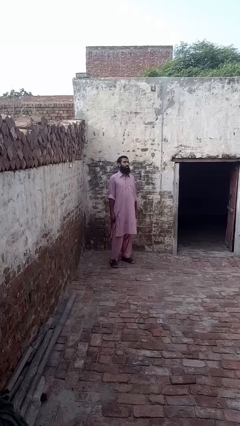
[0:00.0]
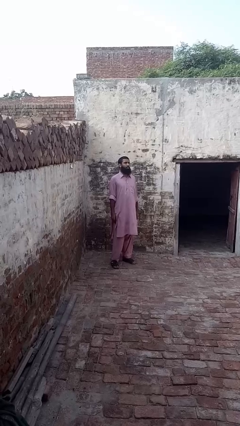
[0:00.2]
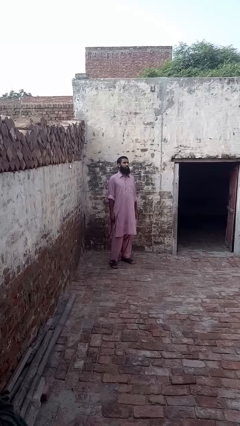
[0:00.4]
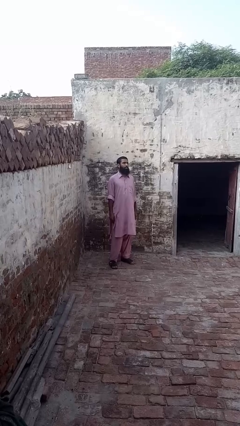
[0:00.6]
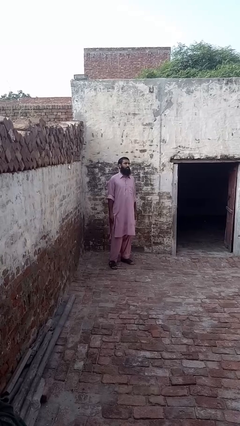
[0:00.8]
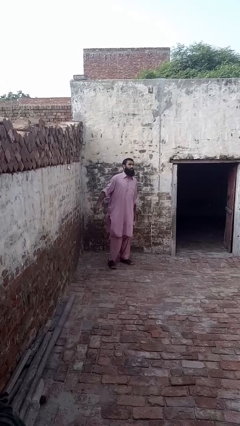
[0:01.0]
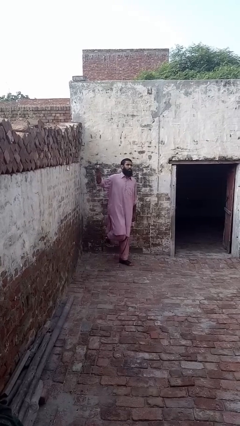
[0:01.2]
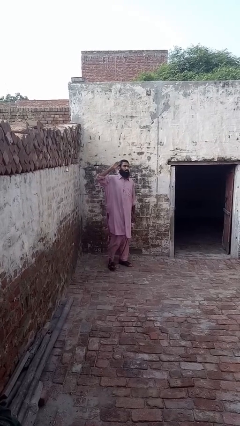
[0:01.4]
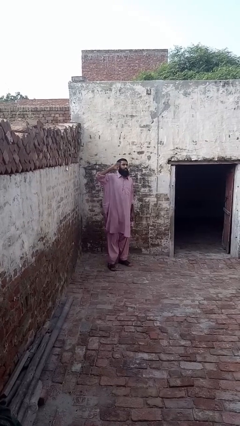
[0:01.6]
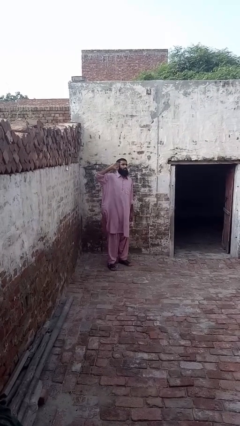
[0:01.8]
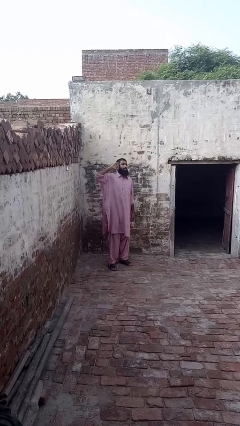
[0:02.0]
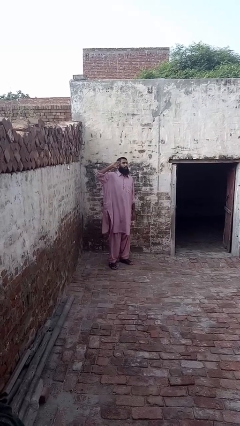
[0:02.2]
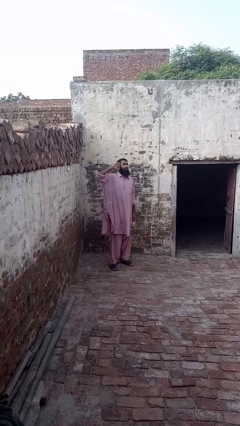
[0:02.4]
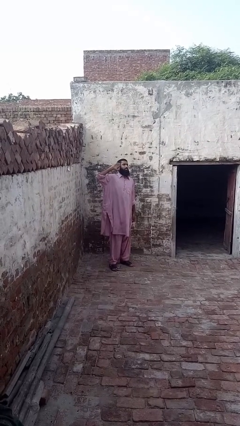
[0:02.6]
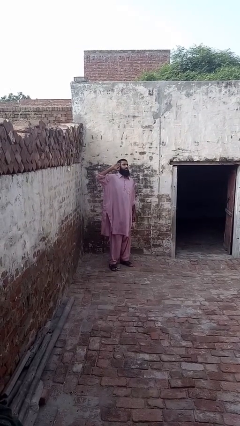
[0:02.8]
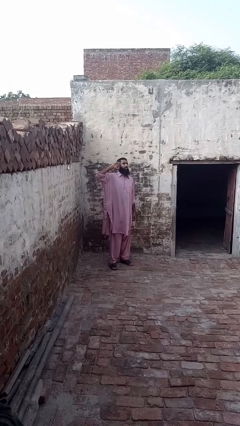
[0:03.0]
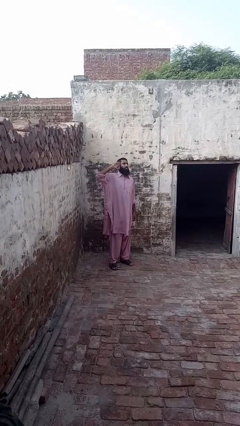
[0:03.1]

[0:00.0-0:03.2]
person salutes

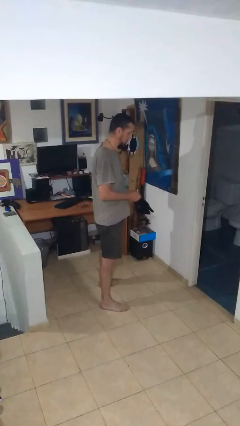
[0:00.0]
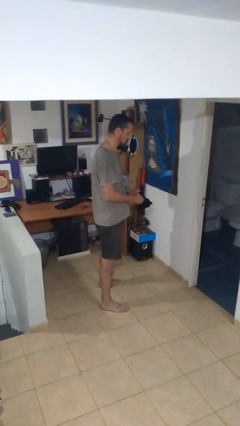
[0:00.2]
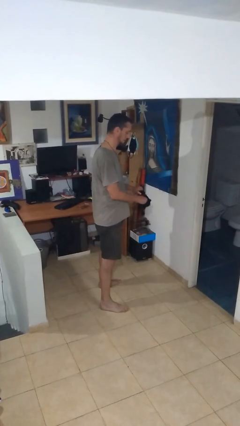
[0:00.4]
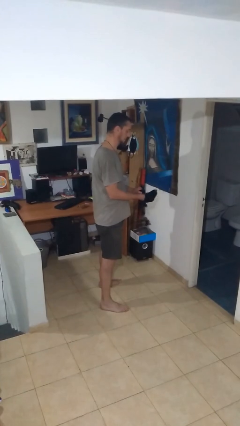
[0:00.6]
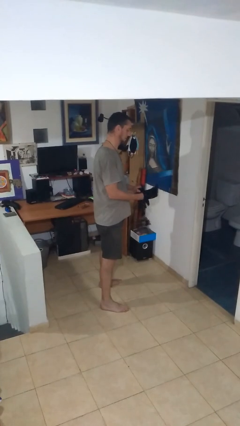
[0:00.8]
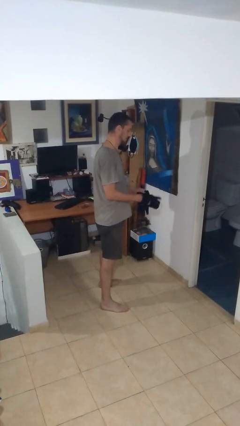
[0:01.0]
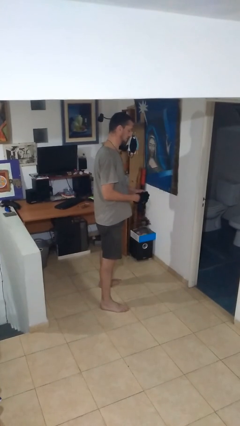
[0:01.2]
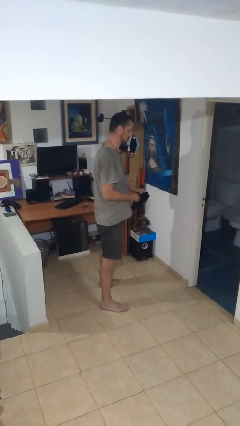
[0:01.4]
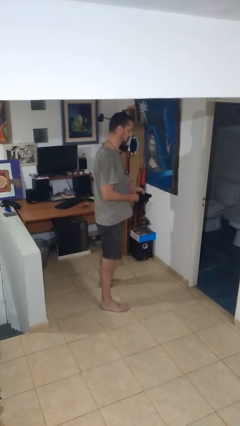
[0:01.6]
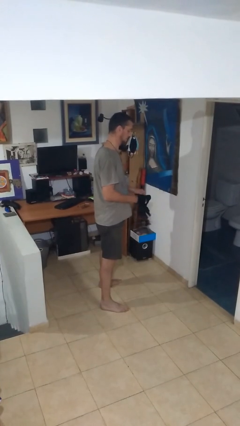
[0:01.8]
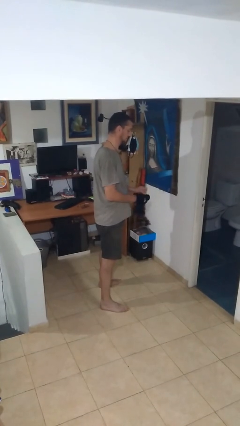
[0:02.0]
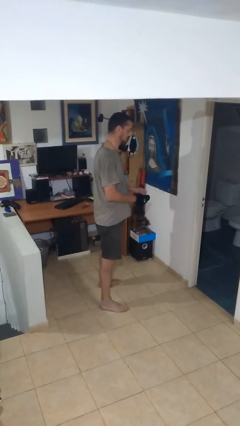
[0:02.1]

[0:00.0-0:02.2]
person puts on gloves

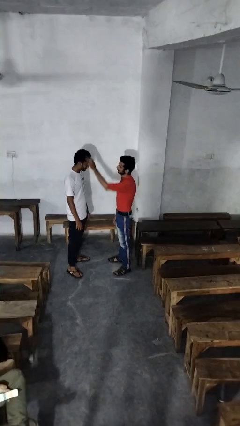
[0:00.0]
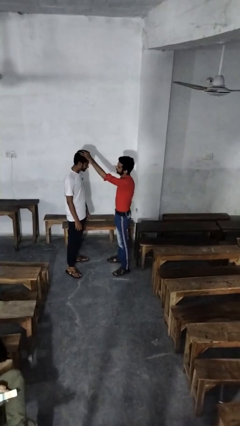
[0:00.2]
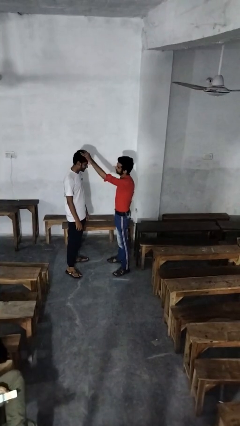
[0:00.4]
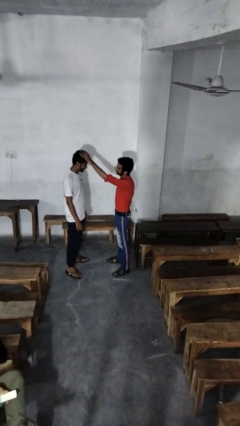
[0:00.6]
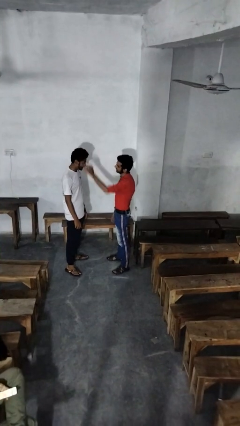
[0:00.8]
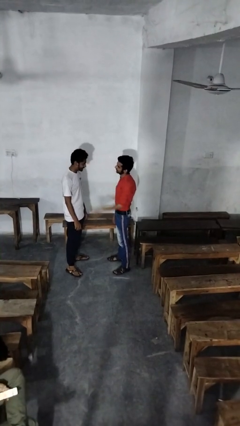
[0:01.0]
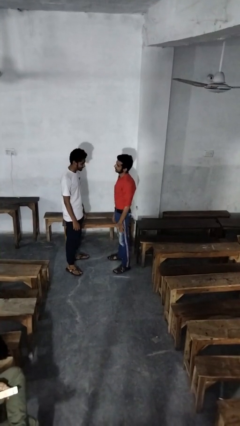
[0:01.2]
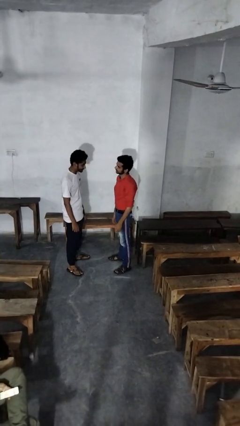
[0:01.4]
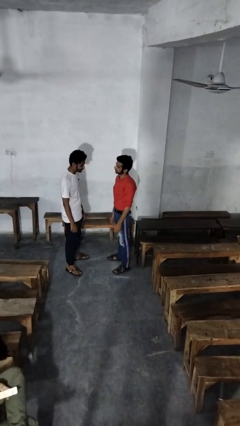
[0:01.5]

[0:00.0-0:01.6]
person grabs person by hair

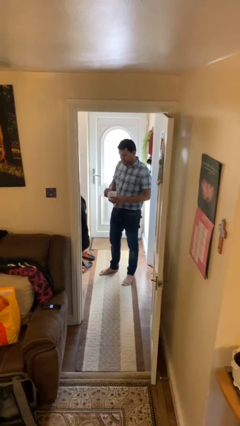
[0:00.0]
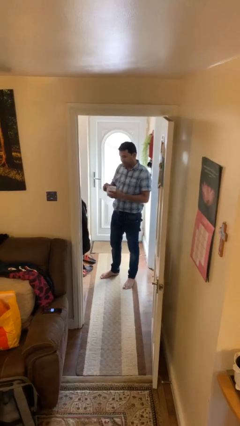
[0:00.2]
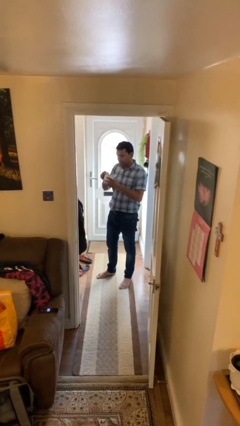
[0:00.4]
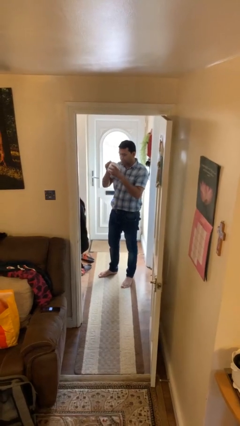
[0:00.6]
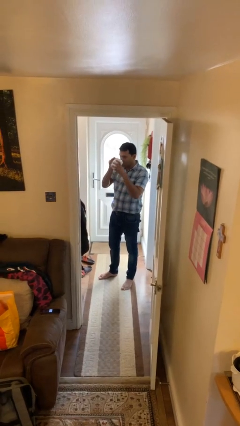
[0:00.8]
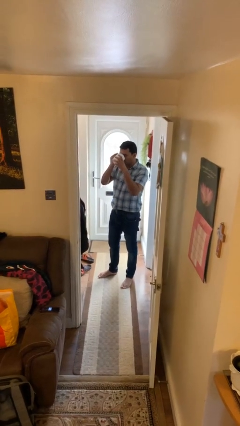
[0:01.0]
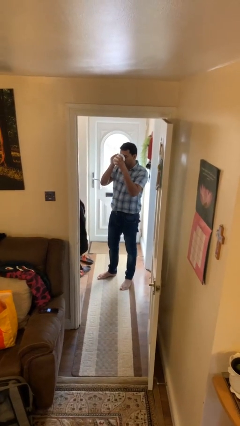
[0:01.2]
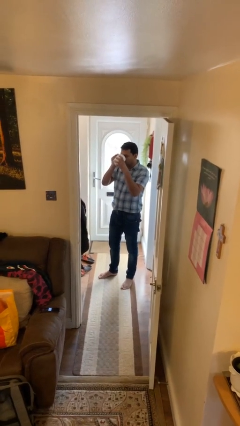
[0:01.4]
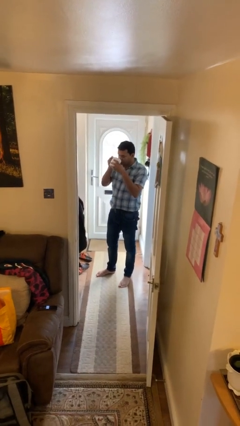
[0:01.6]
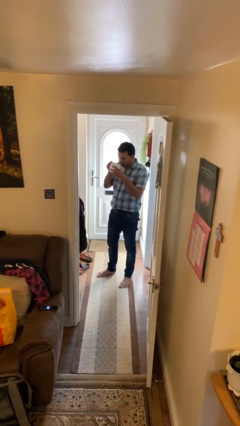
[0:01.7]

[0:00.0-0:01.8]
person drinks from mug

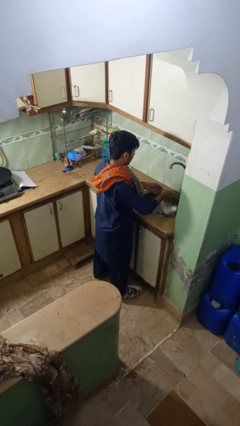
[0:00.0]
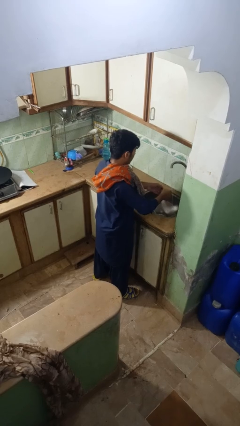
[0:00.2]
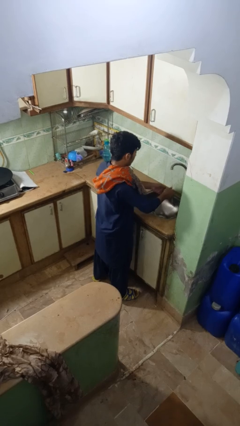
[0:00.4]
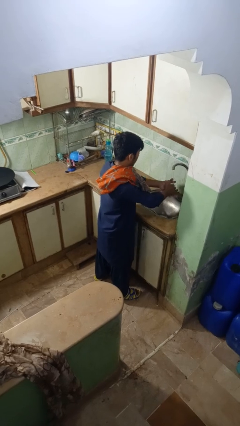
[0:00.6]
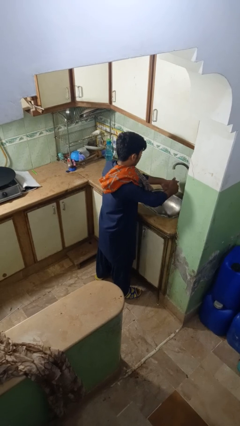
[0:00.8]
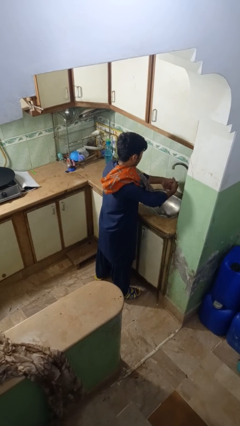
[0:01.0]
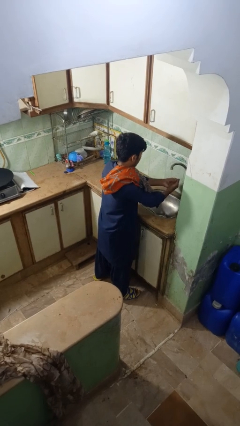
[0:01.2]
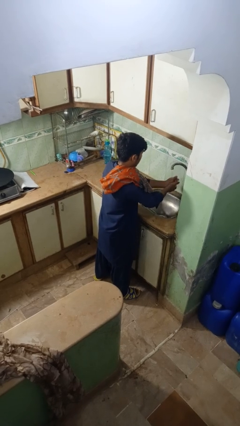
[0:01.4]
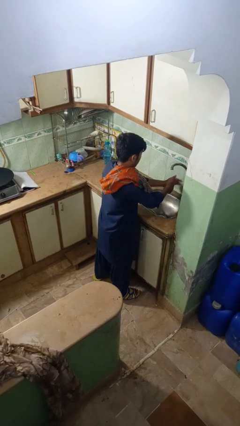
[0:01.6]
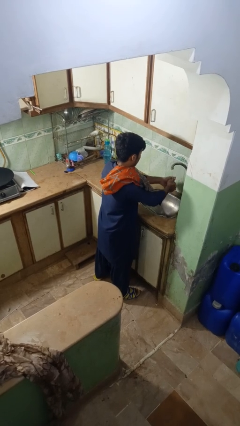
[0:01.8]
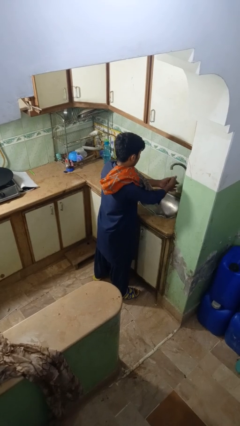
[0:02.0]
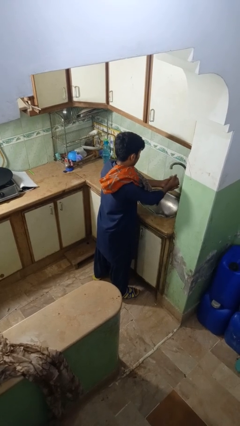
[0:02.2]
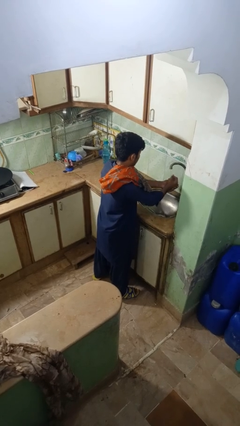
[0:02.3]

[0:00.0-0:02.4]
person washes hands

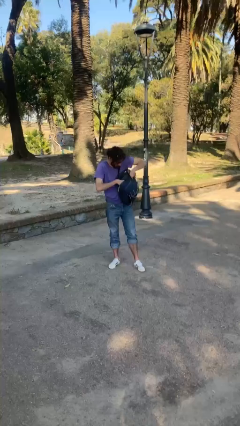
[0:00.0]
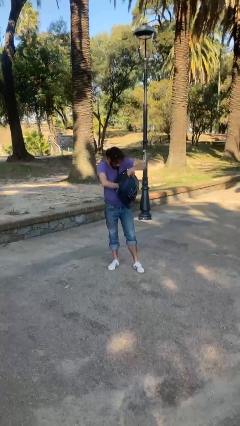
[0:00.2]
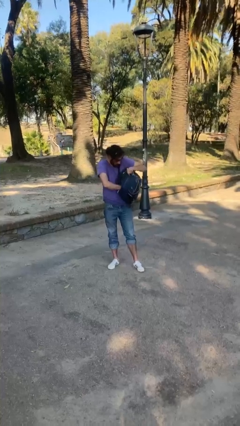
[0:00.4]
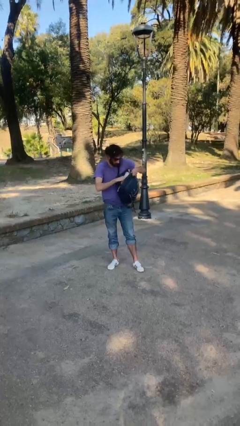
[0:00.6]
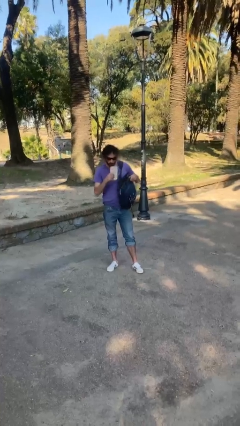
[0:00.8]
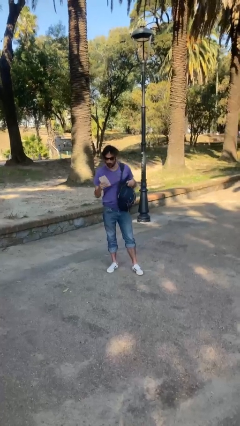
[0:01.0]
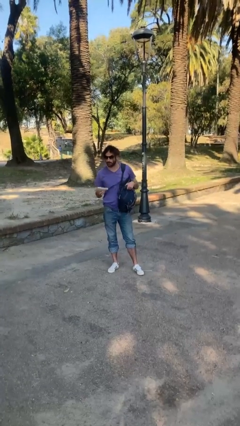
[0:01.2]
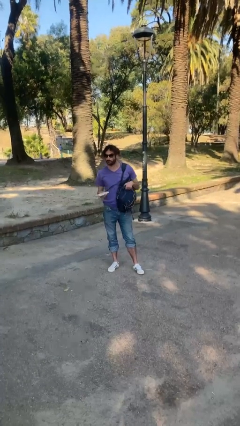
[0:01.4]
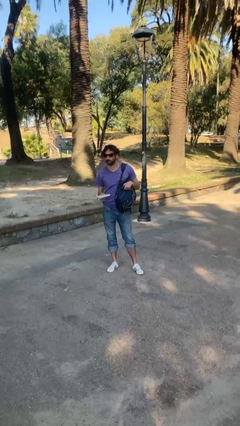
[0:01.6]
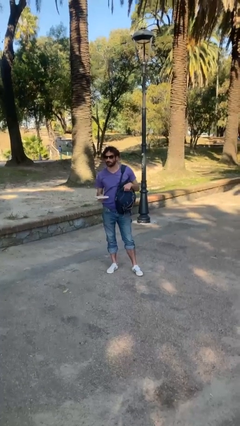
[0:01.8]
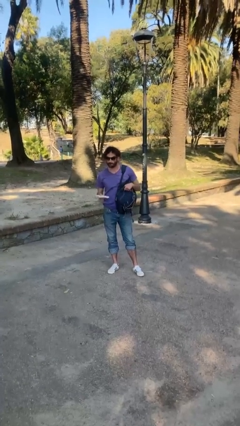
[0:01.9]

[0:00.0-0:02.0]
person takes object from backpack

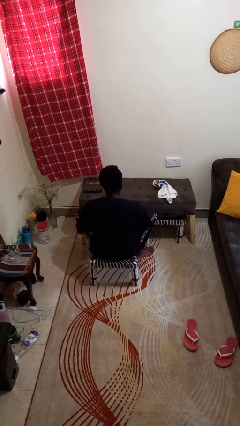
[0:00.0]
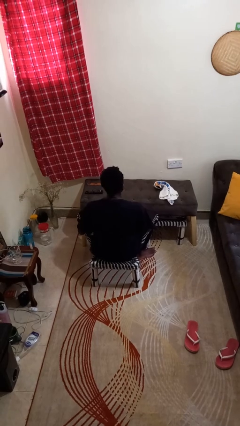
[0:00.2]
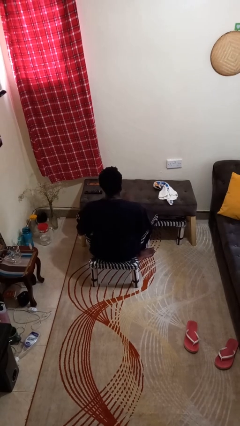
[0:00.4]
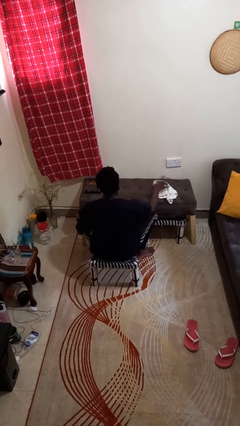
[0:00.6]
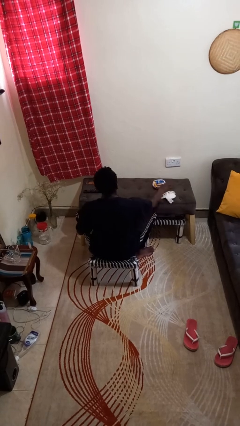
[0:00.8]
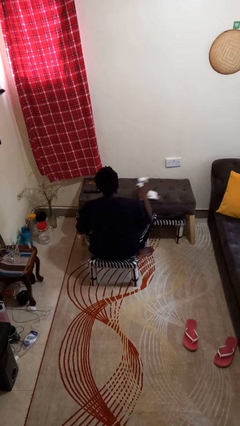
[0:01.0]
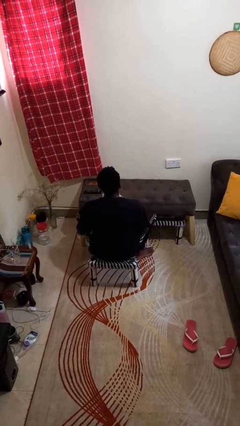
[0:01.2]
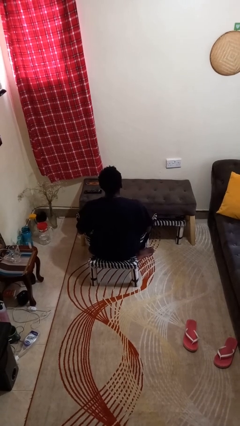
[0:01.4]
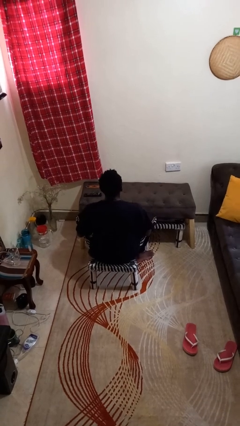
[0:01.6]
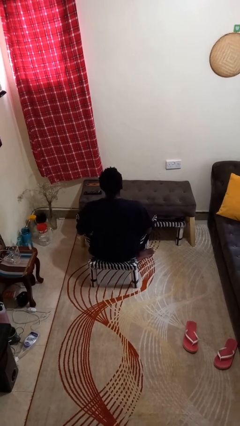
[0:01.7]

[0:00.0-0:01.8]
person picks up object from table

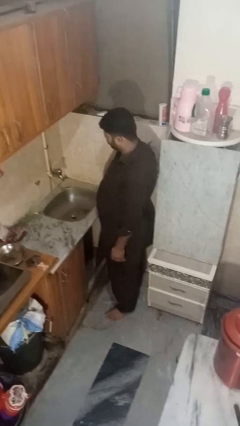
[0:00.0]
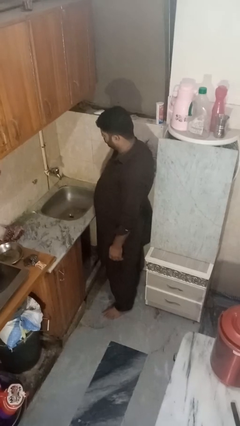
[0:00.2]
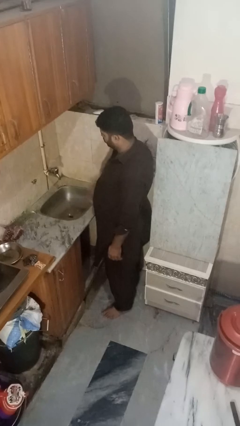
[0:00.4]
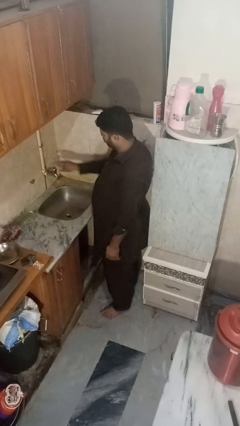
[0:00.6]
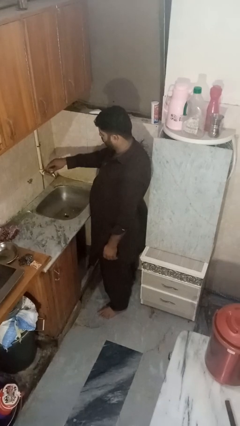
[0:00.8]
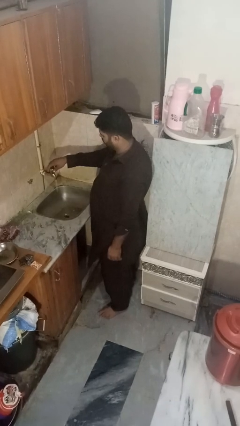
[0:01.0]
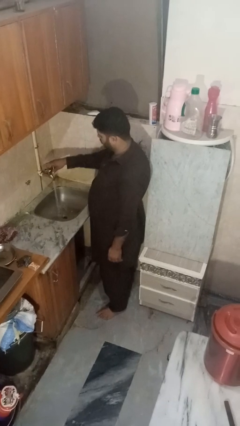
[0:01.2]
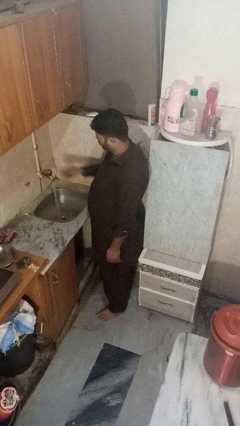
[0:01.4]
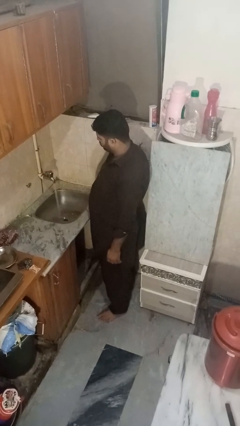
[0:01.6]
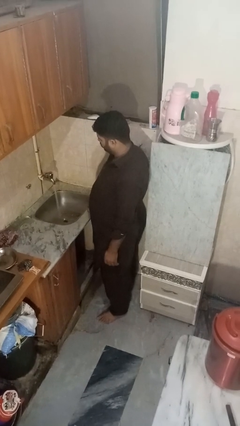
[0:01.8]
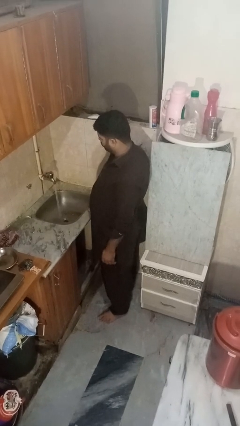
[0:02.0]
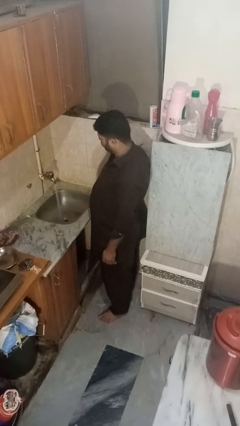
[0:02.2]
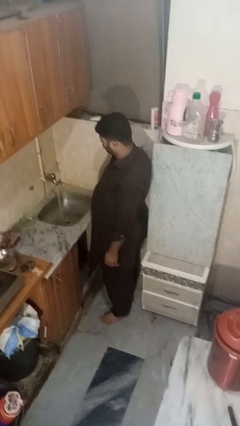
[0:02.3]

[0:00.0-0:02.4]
person turns on faucet
